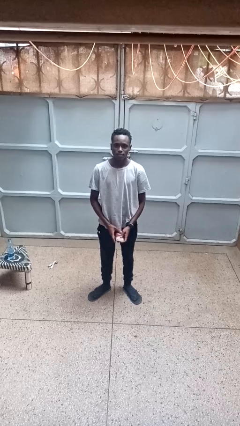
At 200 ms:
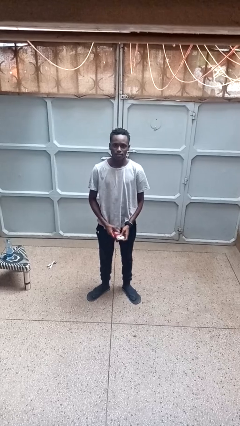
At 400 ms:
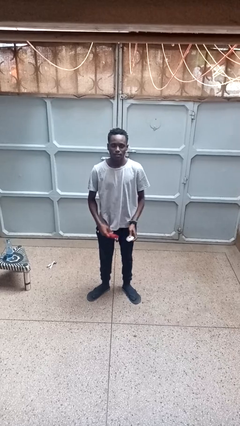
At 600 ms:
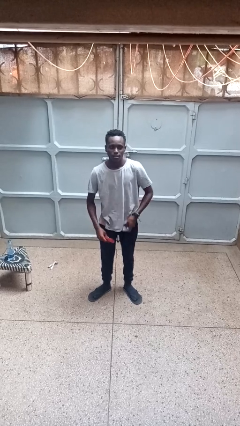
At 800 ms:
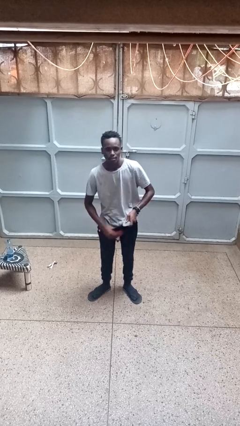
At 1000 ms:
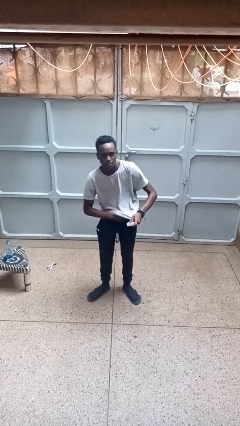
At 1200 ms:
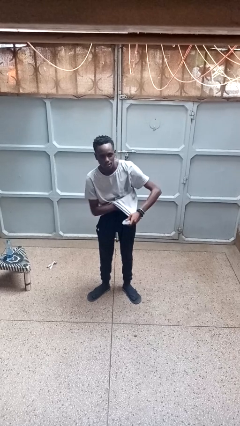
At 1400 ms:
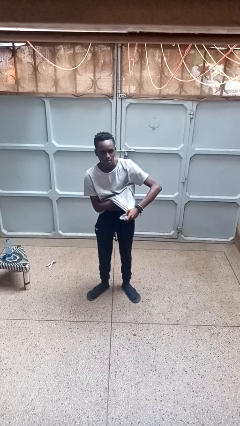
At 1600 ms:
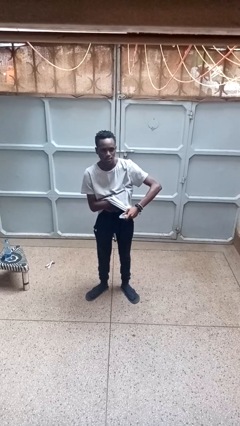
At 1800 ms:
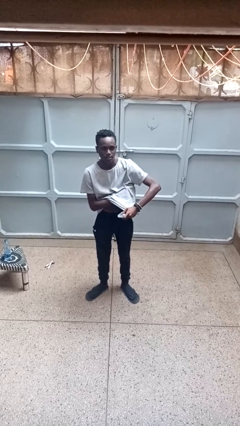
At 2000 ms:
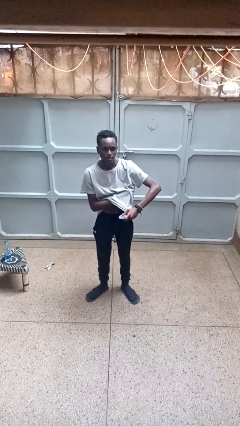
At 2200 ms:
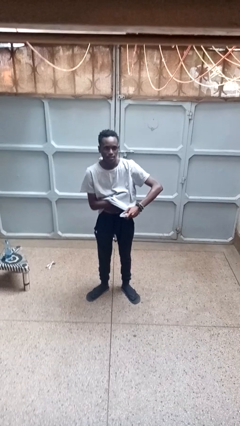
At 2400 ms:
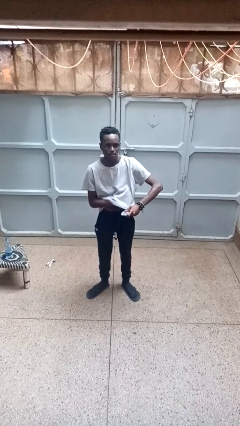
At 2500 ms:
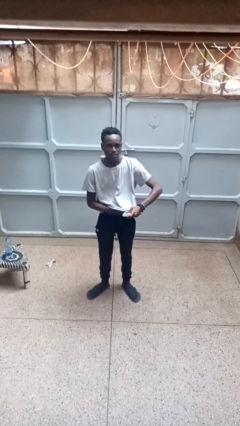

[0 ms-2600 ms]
person applies deodorant

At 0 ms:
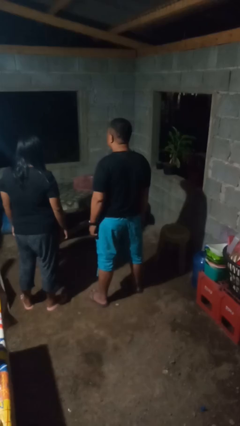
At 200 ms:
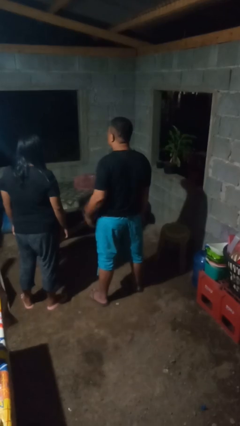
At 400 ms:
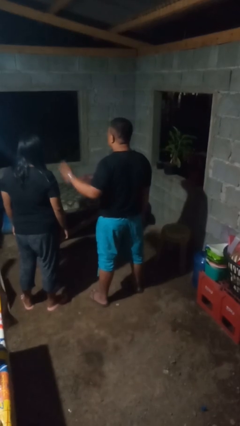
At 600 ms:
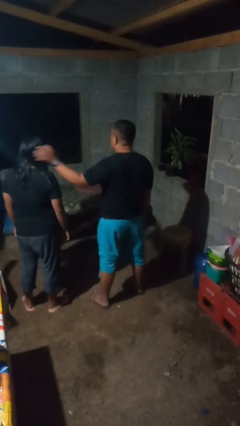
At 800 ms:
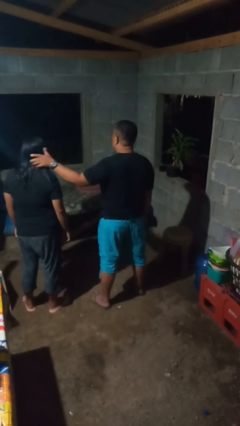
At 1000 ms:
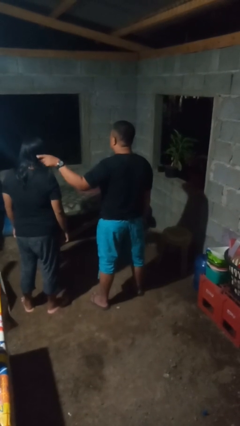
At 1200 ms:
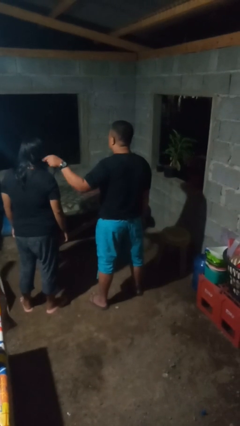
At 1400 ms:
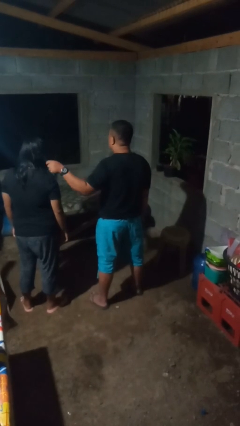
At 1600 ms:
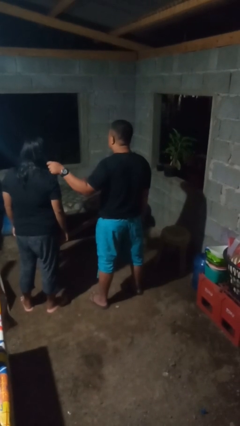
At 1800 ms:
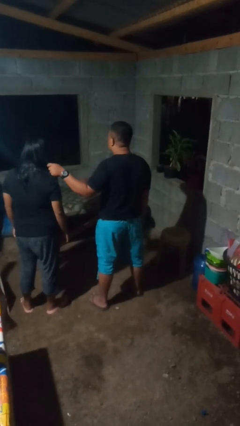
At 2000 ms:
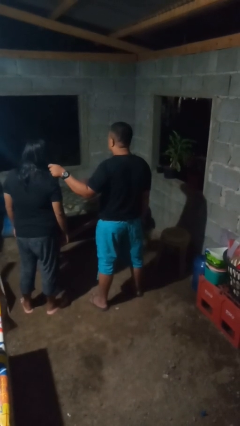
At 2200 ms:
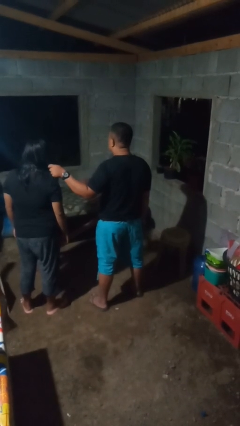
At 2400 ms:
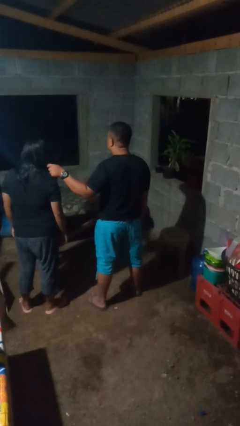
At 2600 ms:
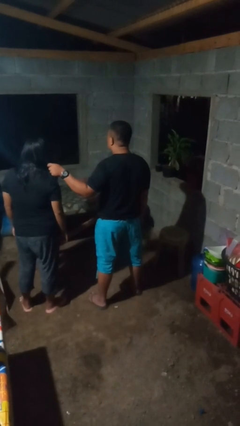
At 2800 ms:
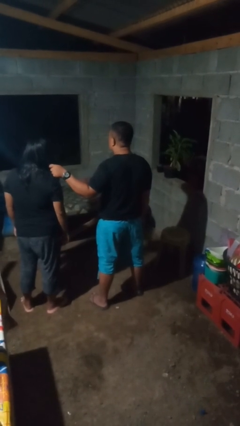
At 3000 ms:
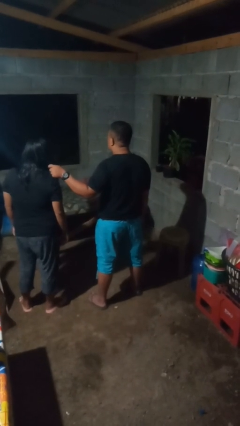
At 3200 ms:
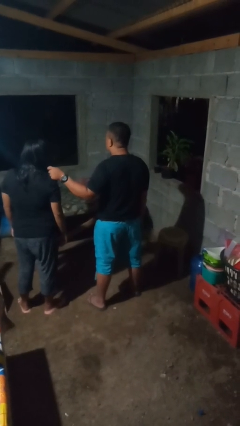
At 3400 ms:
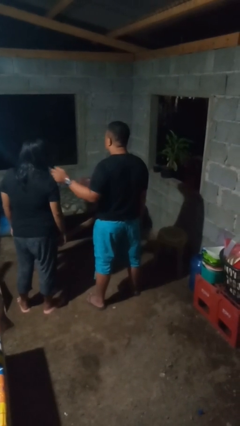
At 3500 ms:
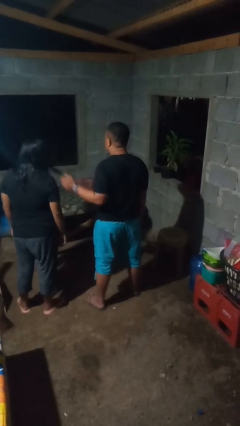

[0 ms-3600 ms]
person grabs person by hair

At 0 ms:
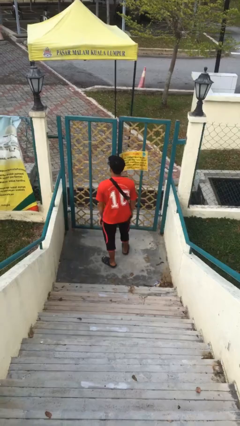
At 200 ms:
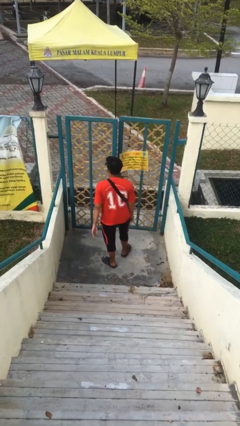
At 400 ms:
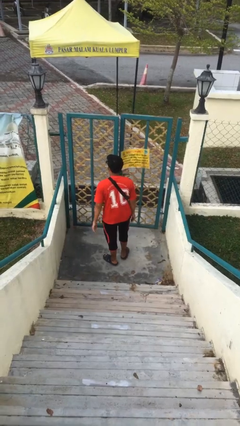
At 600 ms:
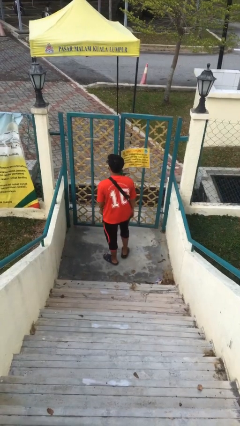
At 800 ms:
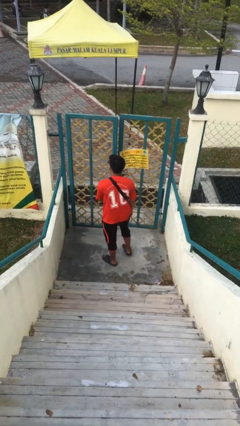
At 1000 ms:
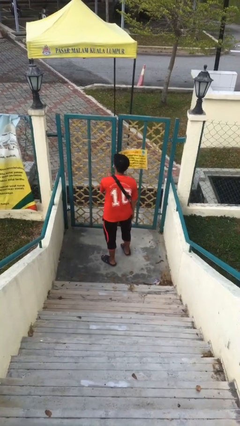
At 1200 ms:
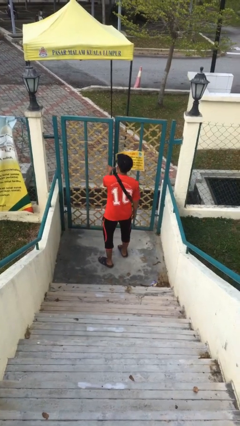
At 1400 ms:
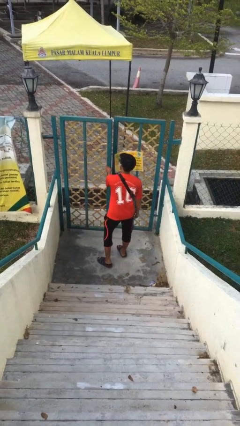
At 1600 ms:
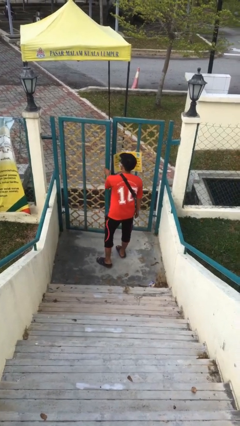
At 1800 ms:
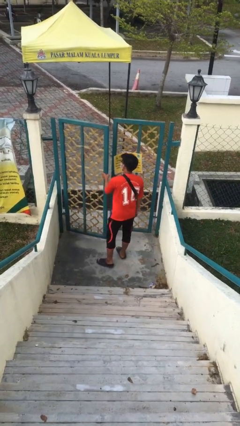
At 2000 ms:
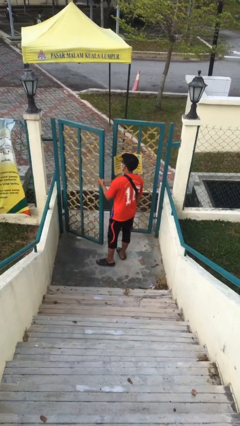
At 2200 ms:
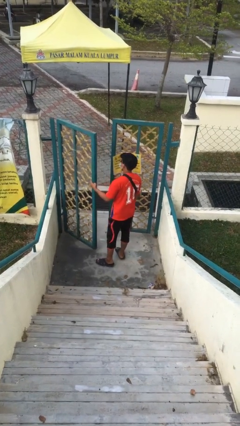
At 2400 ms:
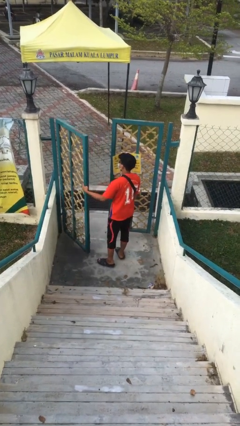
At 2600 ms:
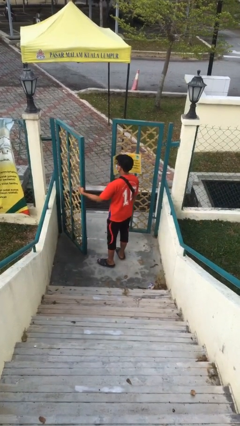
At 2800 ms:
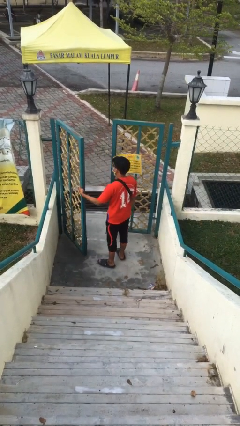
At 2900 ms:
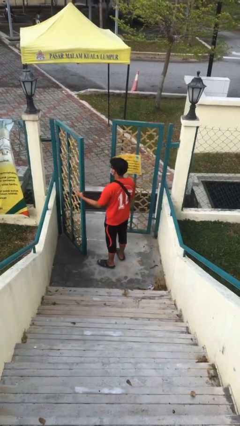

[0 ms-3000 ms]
person opens facility door

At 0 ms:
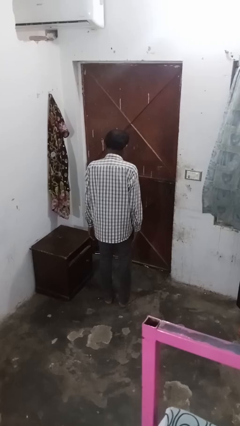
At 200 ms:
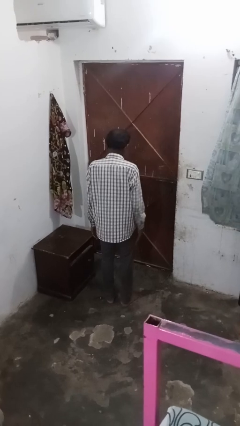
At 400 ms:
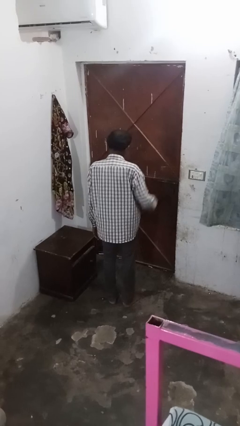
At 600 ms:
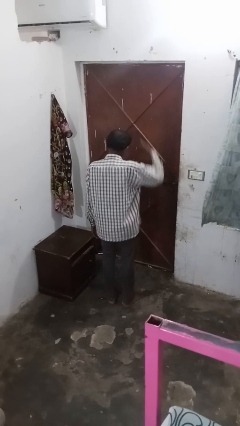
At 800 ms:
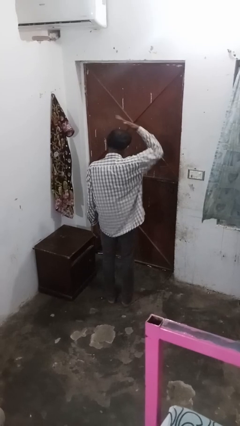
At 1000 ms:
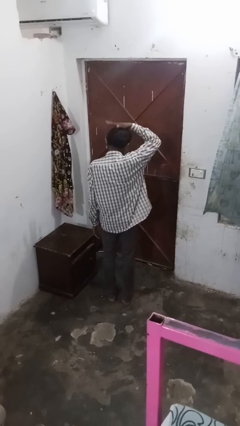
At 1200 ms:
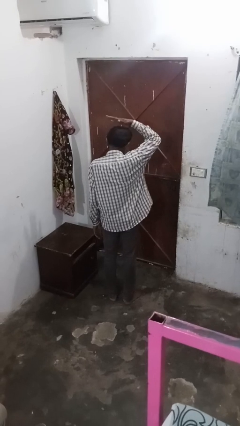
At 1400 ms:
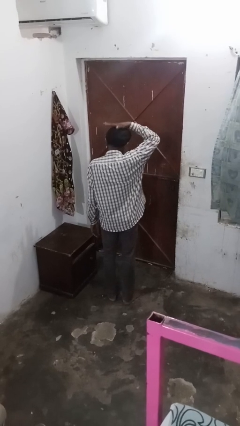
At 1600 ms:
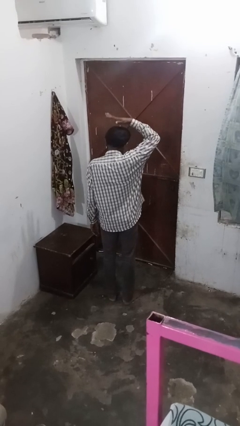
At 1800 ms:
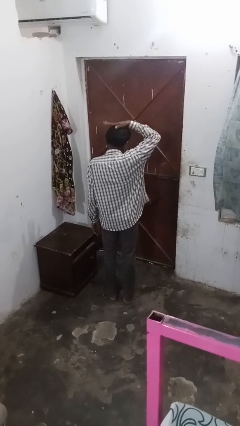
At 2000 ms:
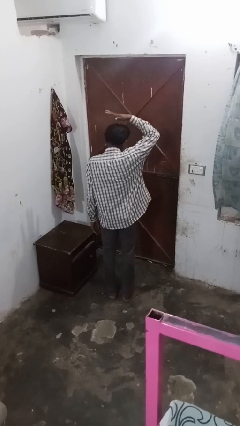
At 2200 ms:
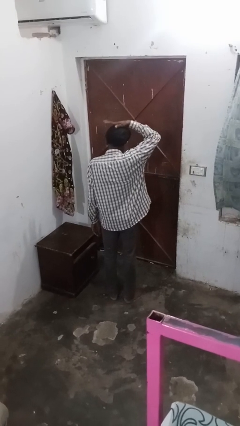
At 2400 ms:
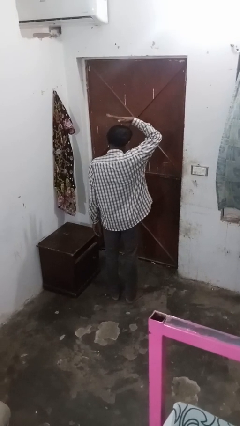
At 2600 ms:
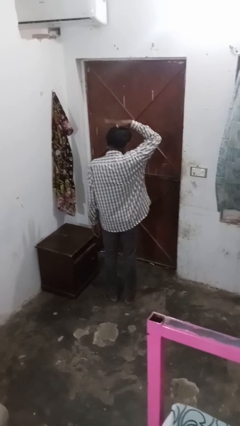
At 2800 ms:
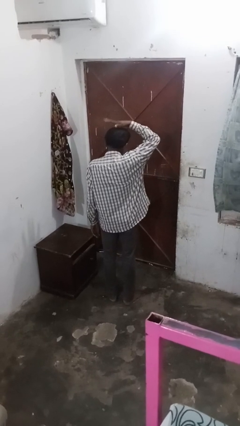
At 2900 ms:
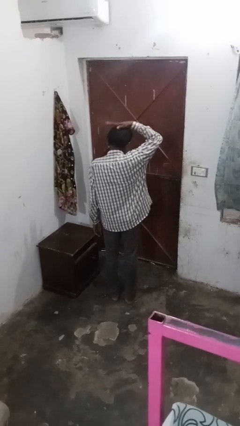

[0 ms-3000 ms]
person pats head

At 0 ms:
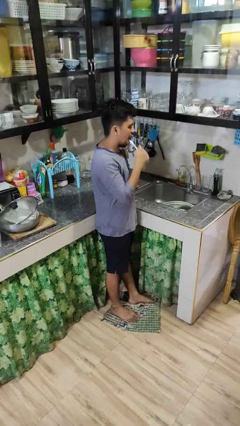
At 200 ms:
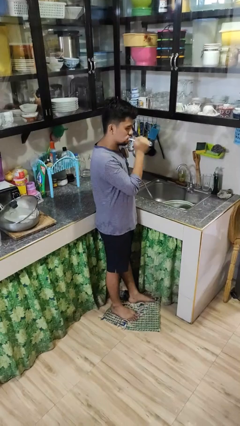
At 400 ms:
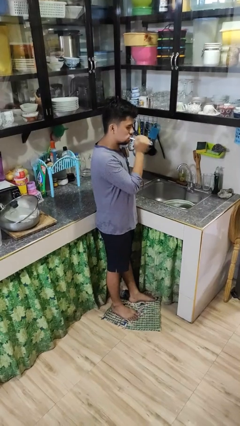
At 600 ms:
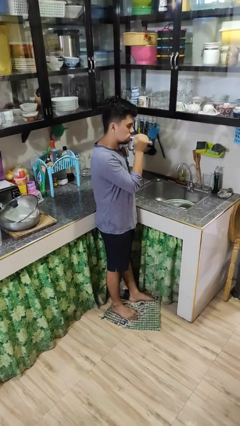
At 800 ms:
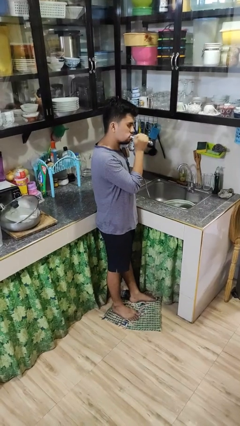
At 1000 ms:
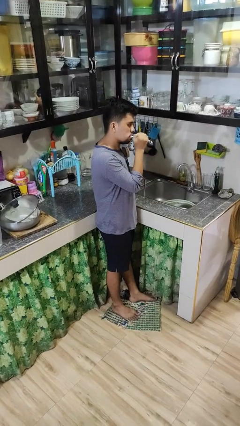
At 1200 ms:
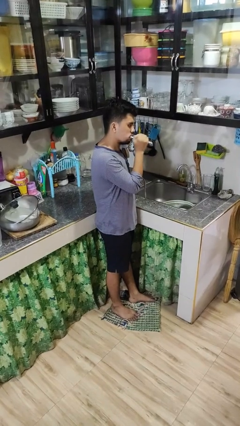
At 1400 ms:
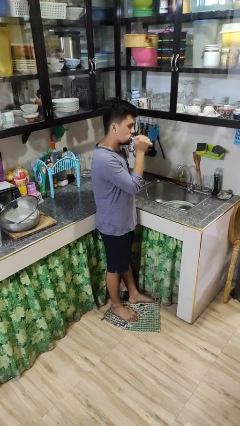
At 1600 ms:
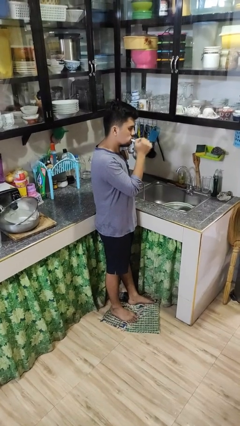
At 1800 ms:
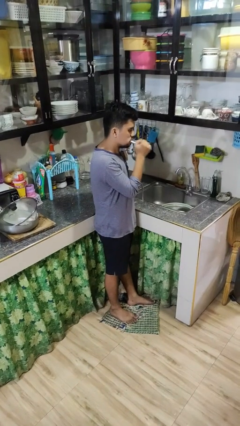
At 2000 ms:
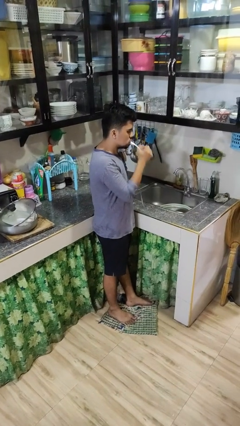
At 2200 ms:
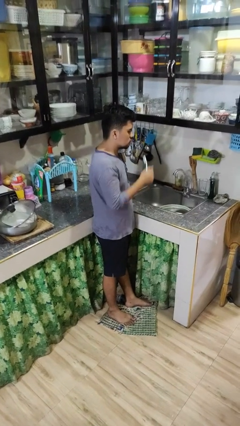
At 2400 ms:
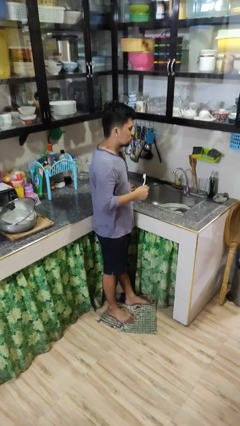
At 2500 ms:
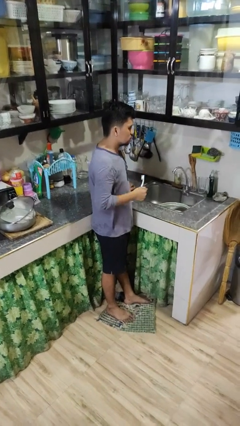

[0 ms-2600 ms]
person brushes teeth

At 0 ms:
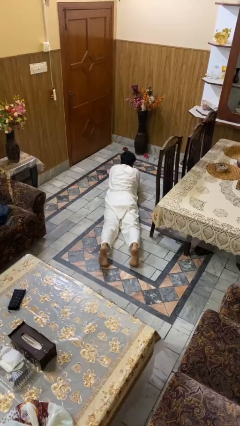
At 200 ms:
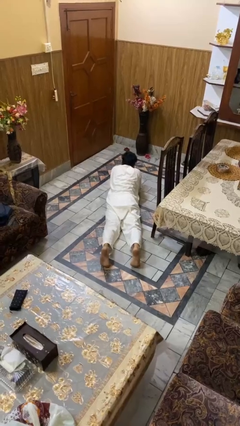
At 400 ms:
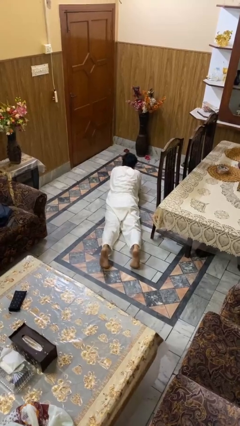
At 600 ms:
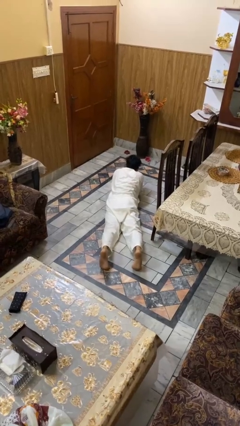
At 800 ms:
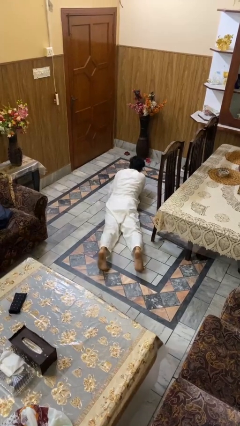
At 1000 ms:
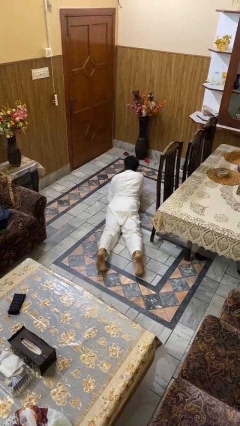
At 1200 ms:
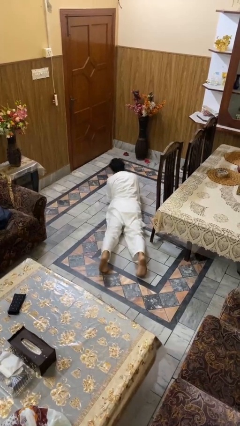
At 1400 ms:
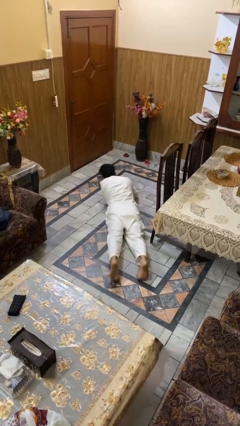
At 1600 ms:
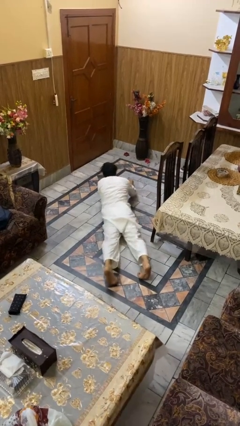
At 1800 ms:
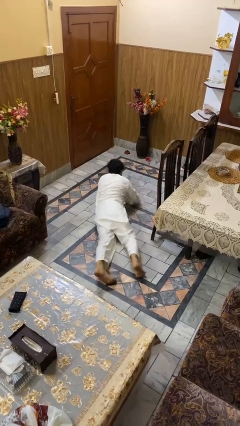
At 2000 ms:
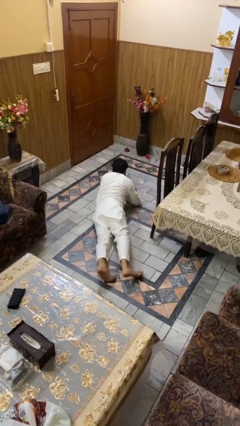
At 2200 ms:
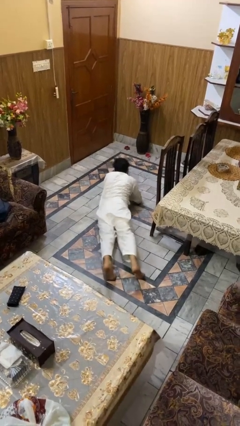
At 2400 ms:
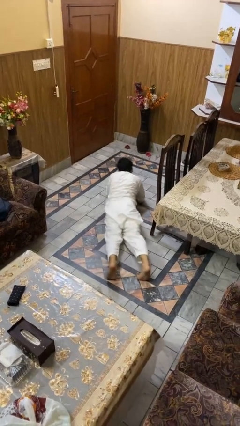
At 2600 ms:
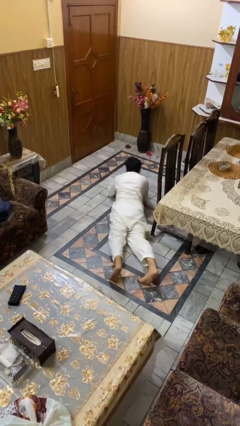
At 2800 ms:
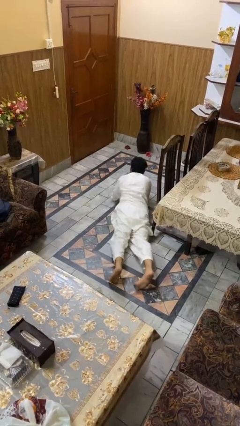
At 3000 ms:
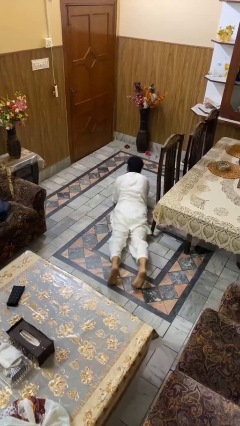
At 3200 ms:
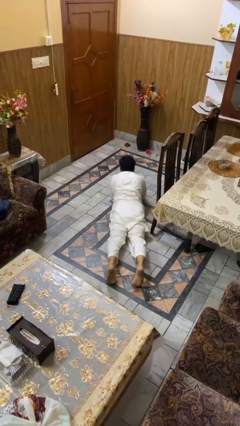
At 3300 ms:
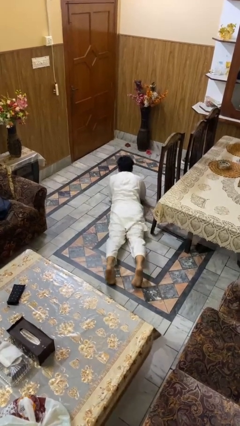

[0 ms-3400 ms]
person crawls
